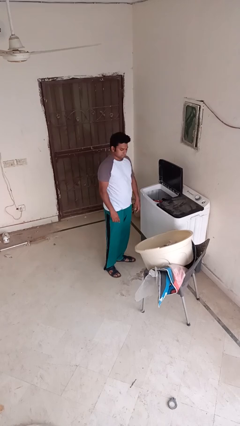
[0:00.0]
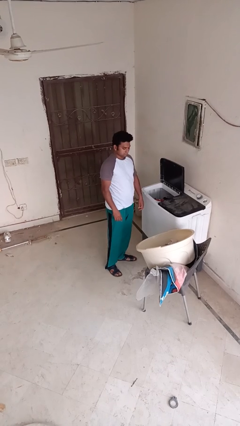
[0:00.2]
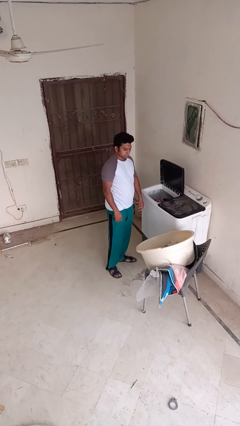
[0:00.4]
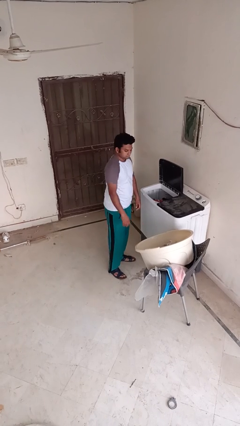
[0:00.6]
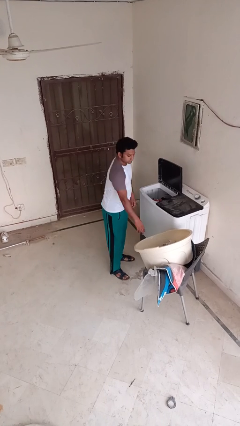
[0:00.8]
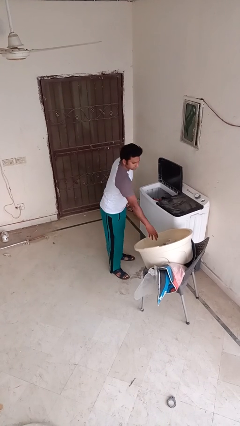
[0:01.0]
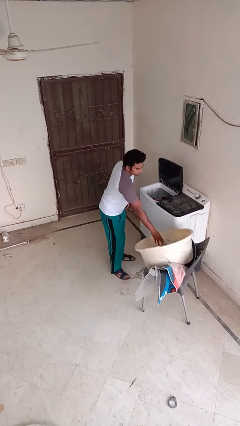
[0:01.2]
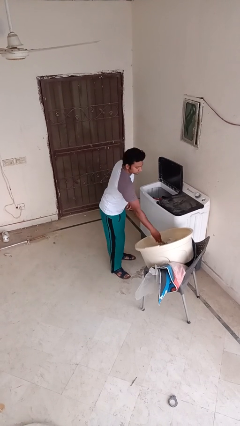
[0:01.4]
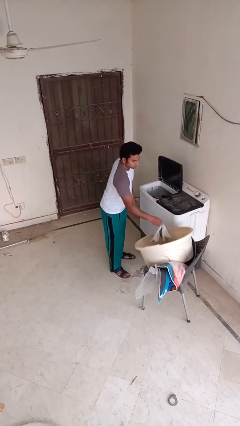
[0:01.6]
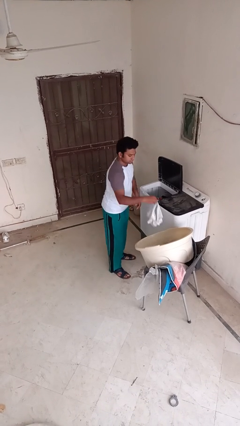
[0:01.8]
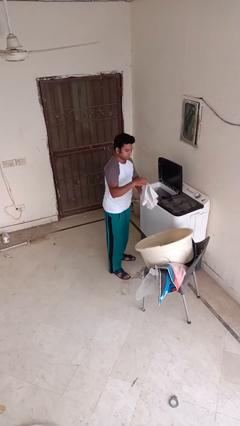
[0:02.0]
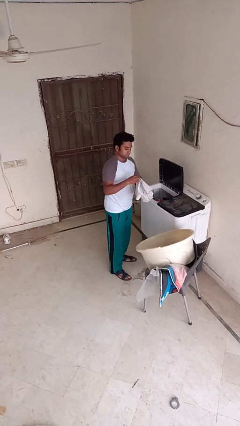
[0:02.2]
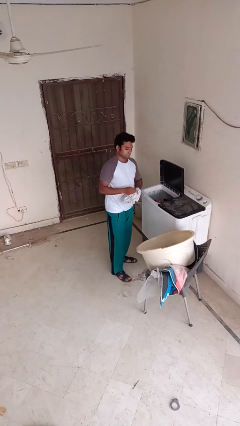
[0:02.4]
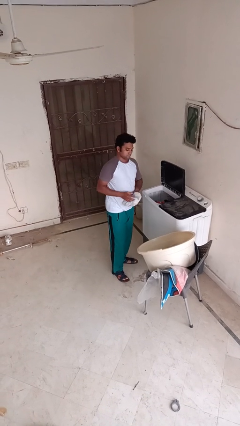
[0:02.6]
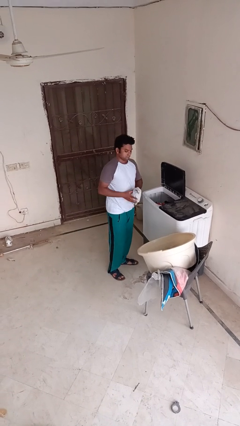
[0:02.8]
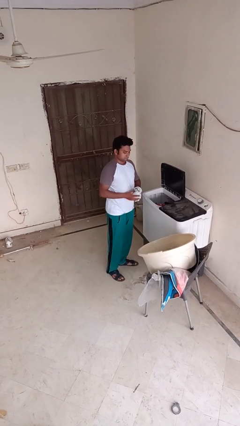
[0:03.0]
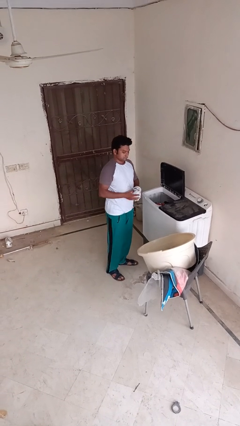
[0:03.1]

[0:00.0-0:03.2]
person unloads clotheswasher

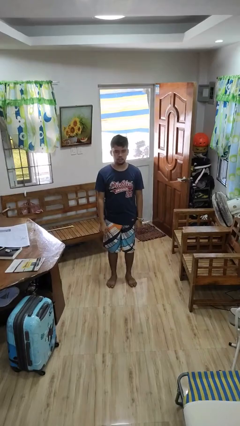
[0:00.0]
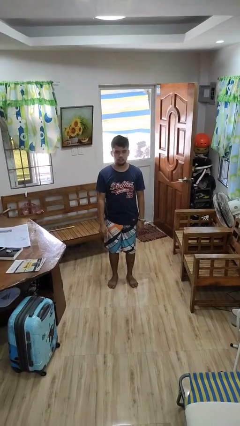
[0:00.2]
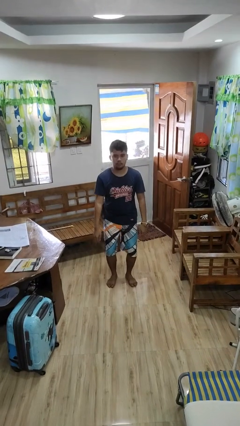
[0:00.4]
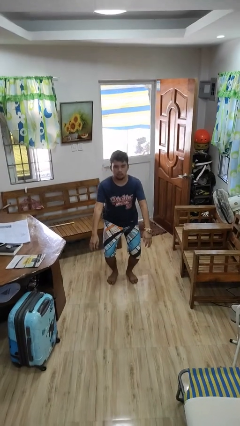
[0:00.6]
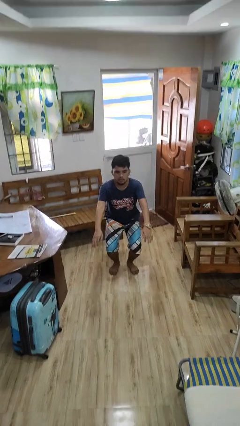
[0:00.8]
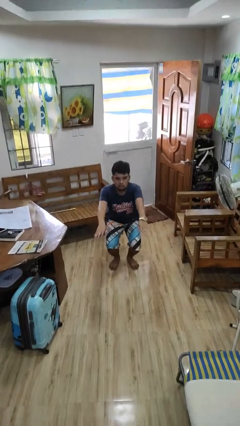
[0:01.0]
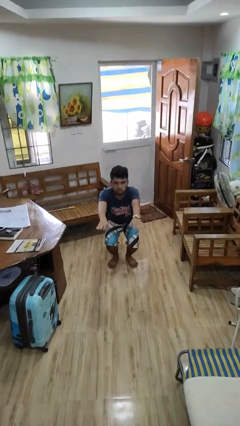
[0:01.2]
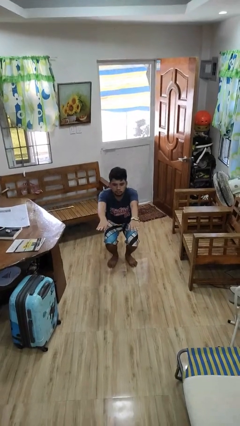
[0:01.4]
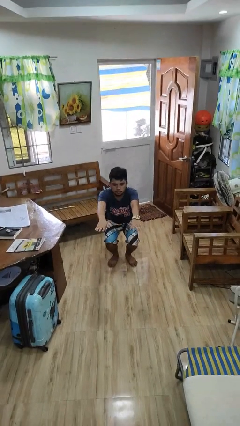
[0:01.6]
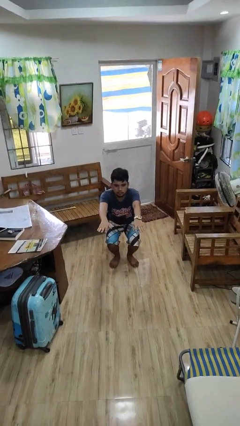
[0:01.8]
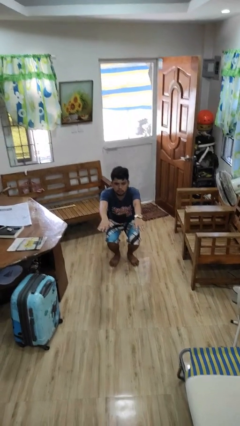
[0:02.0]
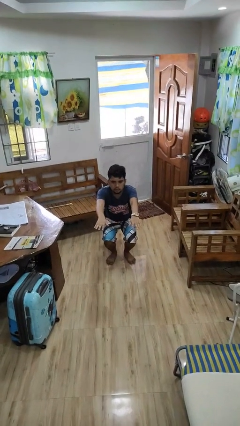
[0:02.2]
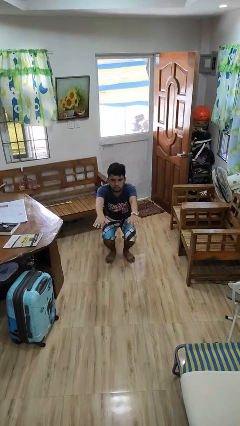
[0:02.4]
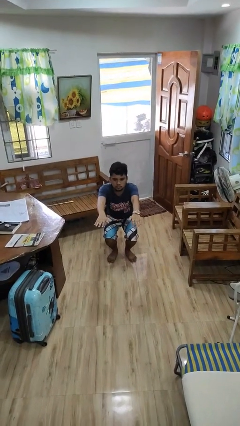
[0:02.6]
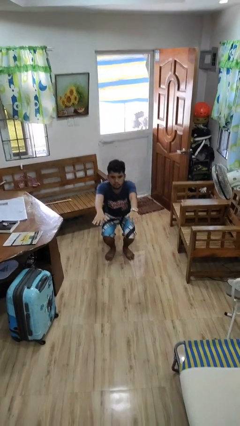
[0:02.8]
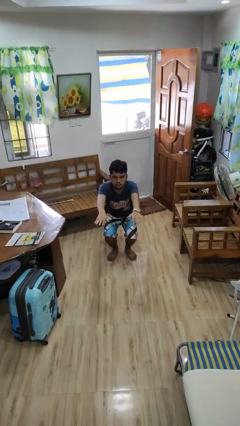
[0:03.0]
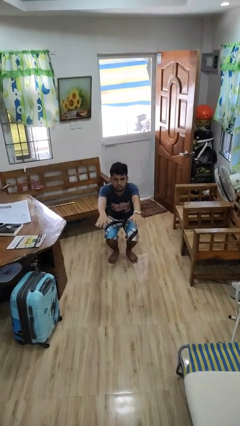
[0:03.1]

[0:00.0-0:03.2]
person squats

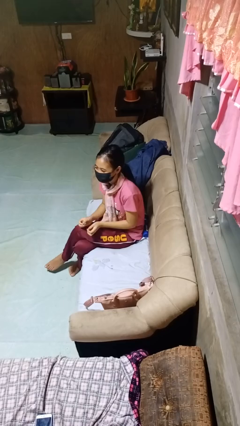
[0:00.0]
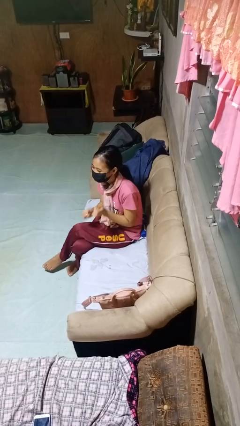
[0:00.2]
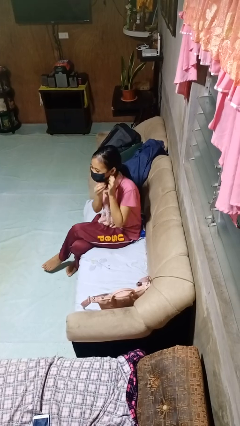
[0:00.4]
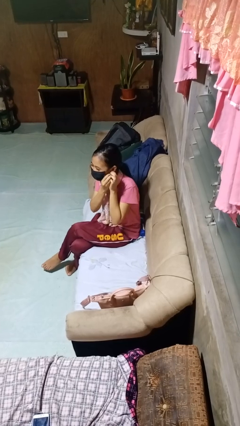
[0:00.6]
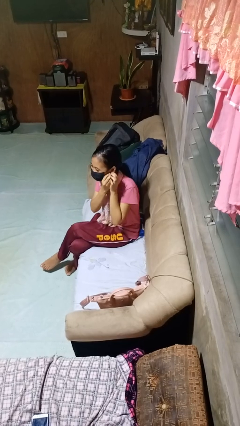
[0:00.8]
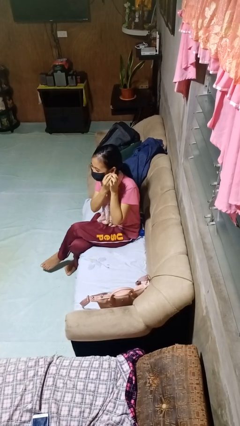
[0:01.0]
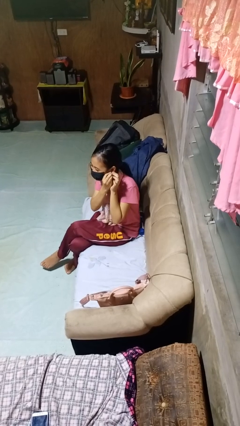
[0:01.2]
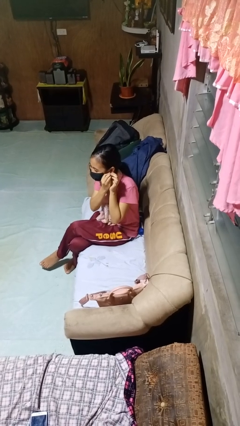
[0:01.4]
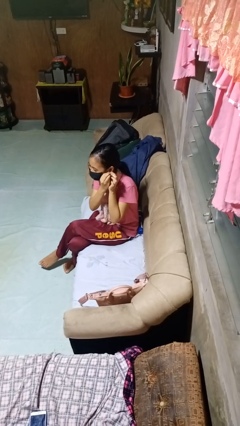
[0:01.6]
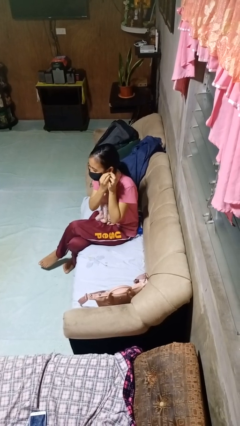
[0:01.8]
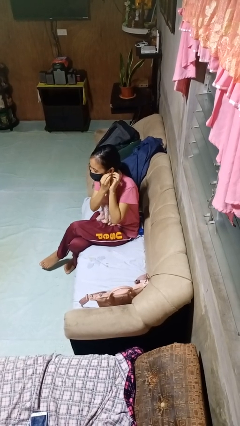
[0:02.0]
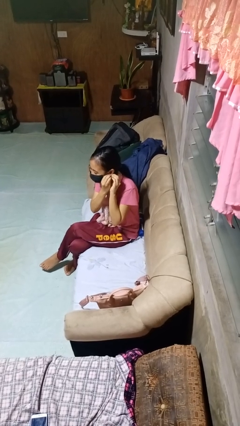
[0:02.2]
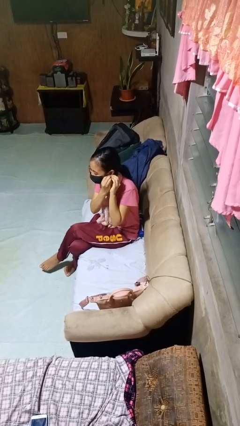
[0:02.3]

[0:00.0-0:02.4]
person puts on earrings

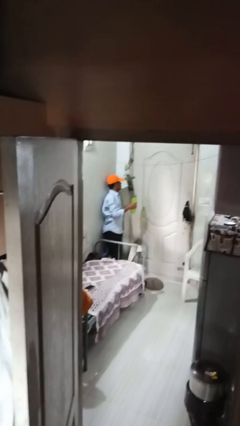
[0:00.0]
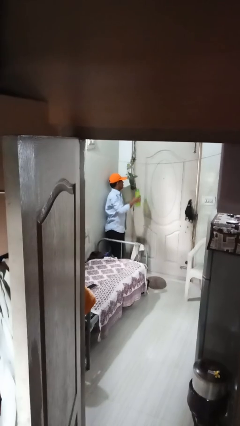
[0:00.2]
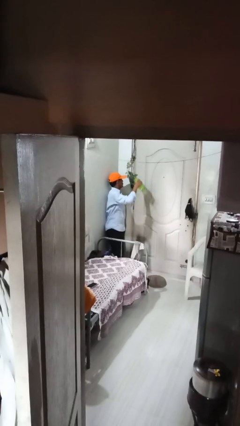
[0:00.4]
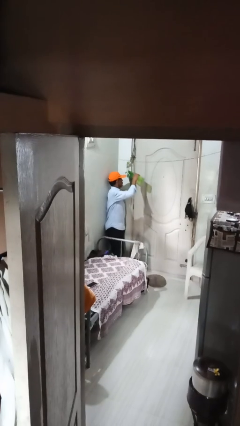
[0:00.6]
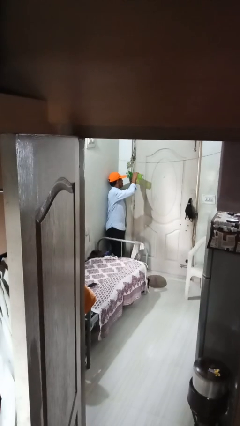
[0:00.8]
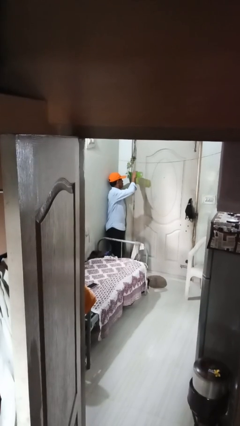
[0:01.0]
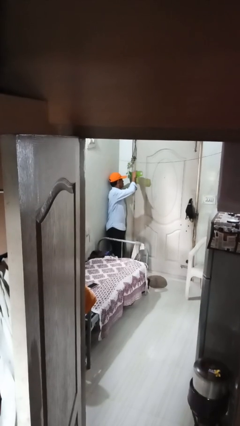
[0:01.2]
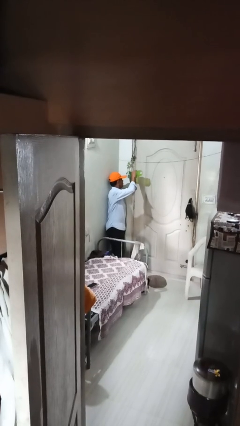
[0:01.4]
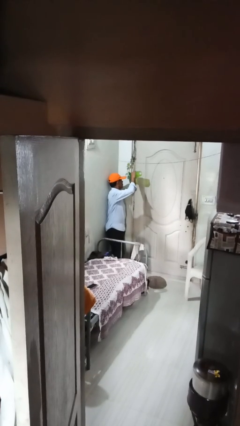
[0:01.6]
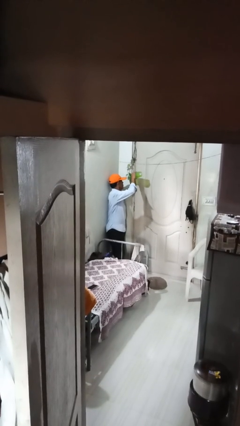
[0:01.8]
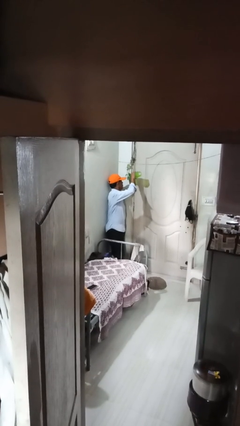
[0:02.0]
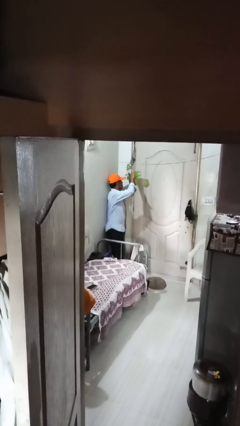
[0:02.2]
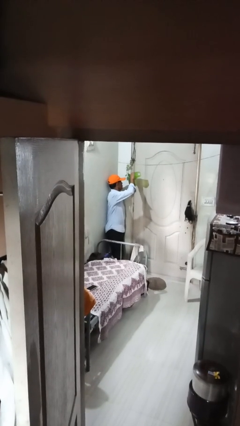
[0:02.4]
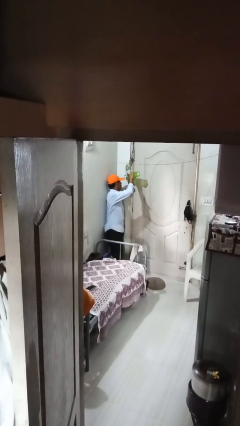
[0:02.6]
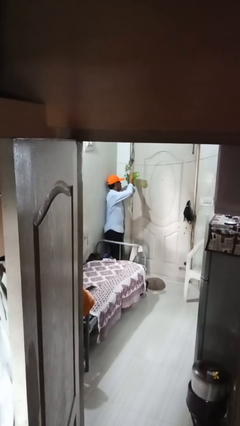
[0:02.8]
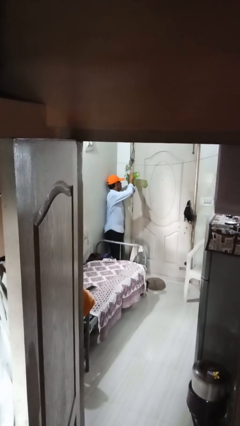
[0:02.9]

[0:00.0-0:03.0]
person waters houseplant

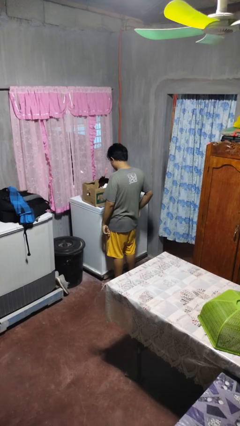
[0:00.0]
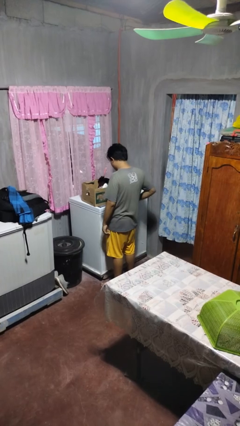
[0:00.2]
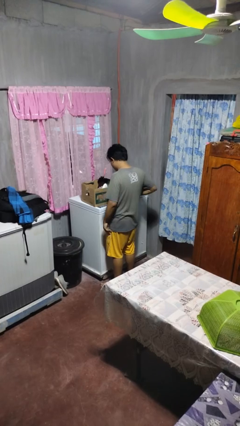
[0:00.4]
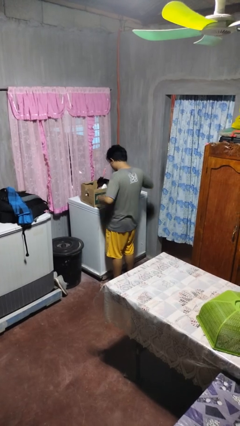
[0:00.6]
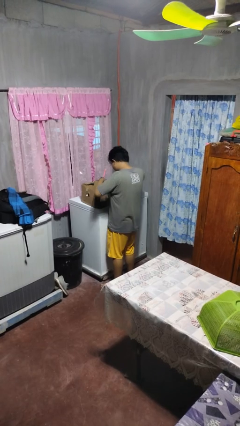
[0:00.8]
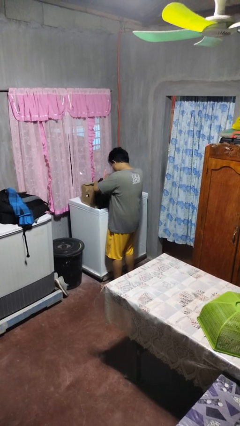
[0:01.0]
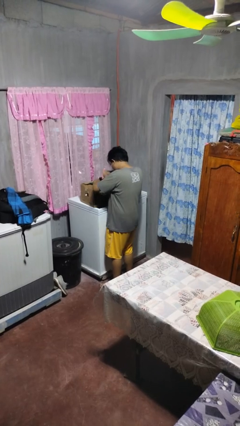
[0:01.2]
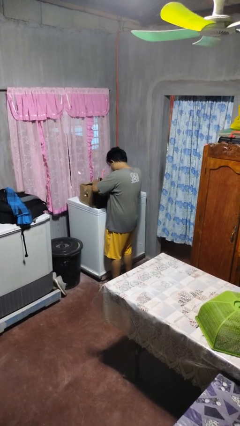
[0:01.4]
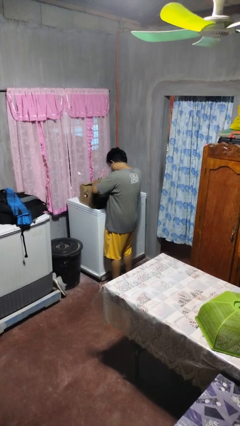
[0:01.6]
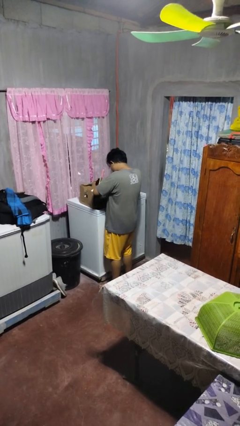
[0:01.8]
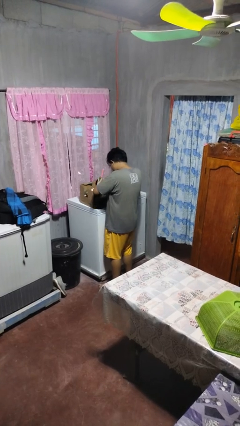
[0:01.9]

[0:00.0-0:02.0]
person searches in box

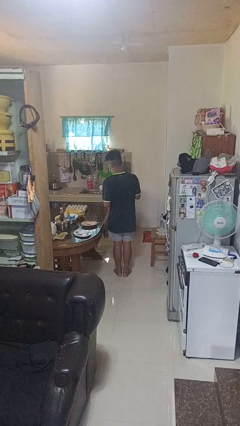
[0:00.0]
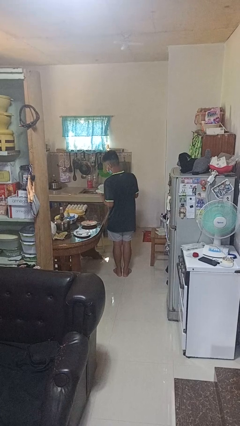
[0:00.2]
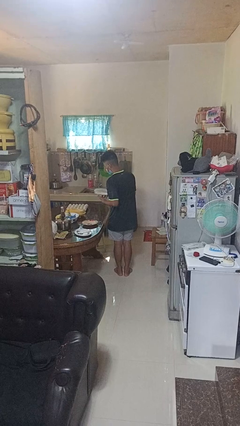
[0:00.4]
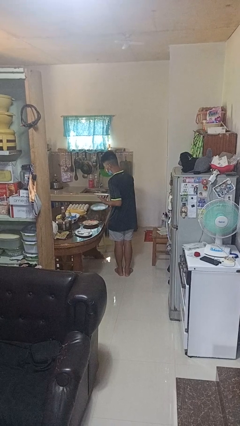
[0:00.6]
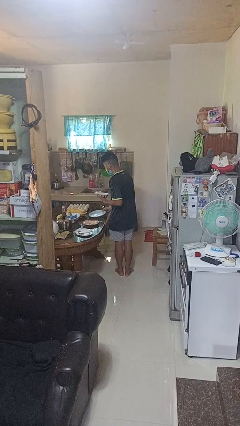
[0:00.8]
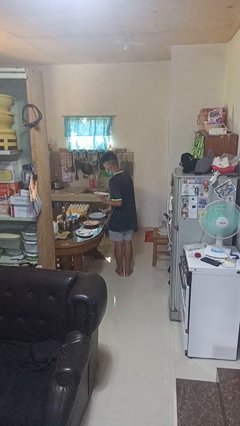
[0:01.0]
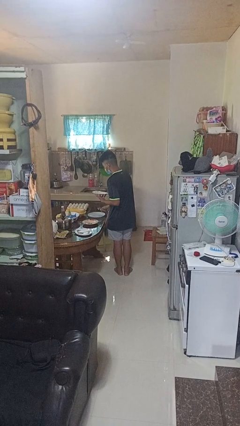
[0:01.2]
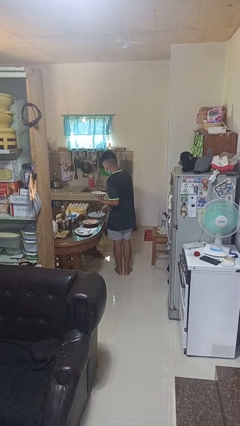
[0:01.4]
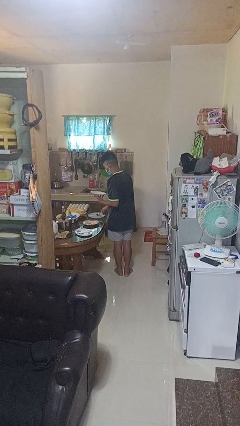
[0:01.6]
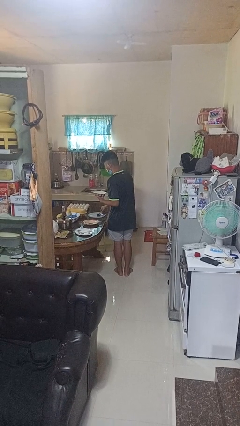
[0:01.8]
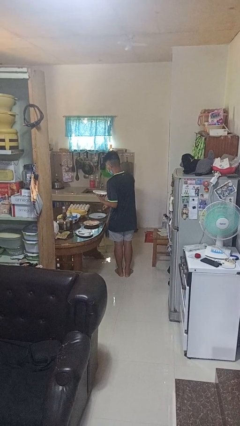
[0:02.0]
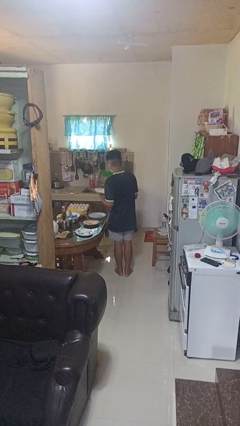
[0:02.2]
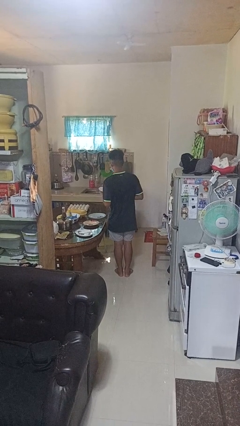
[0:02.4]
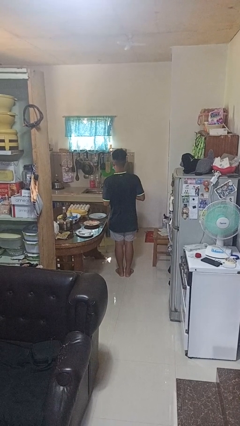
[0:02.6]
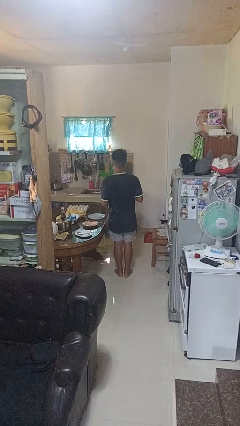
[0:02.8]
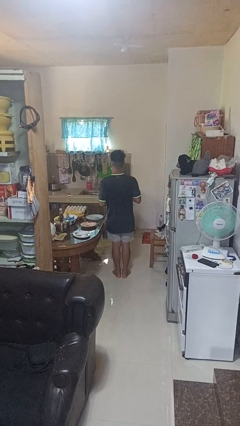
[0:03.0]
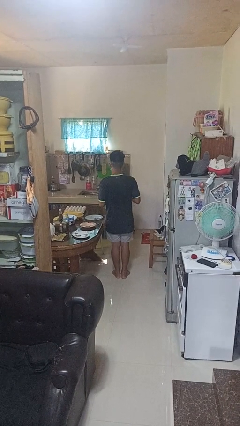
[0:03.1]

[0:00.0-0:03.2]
person sets table

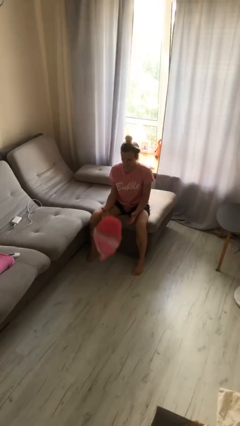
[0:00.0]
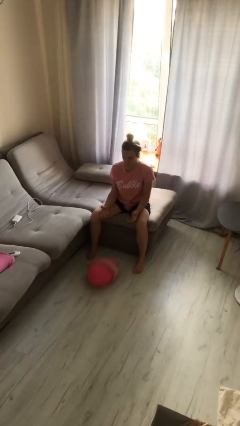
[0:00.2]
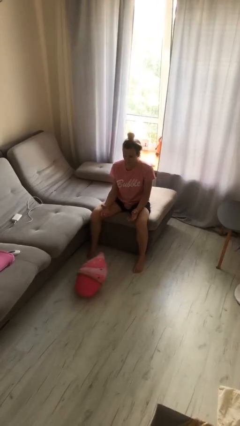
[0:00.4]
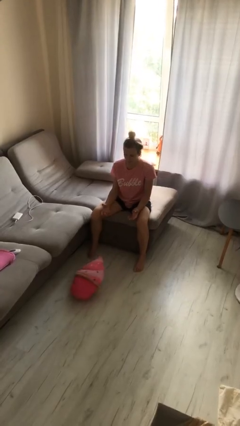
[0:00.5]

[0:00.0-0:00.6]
person drops object
